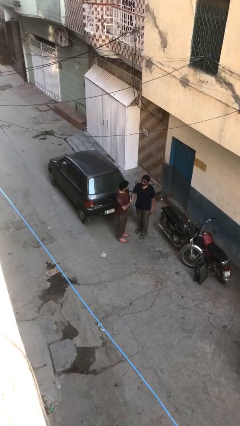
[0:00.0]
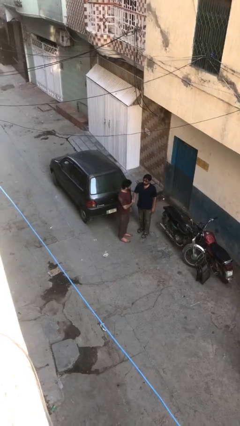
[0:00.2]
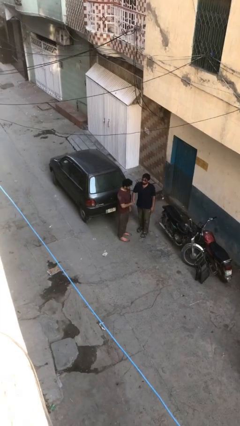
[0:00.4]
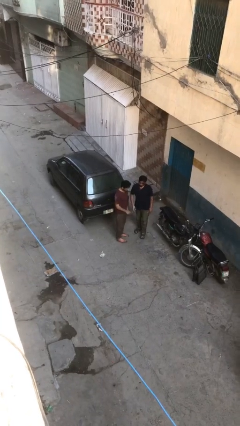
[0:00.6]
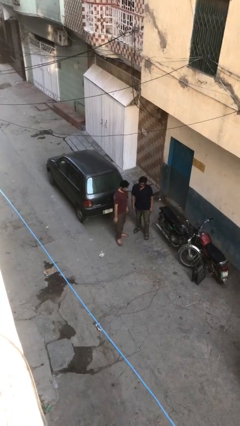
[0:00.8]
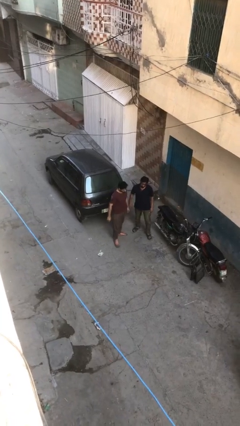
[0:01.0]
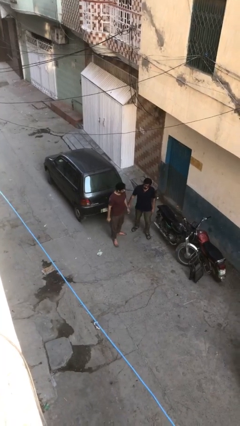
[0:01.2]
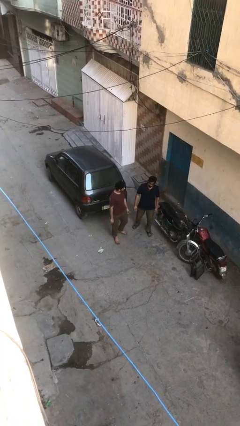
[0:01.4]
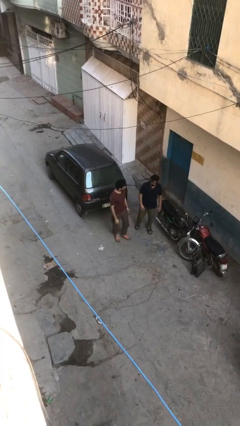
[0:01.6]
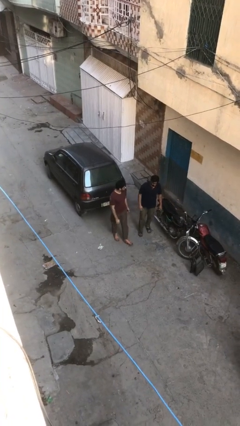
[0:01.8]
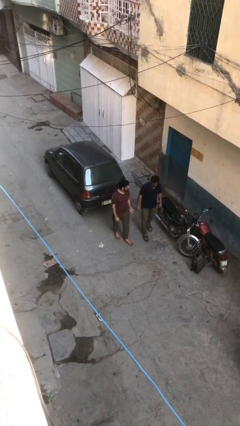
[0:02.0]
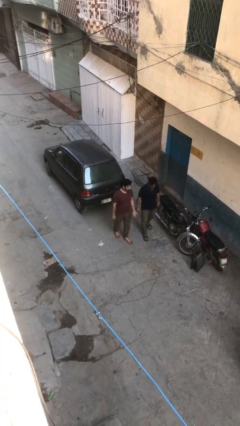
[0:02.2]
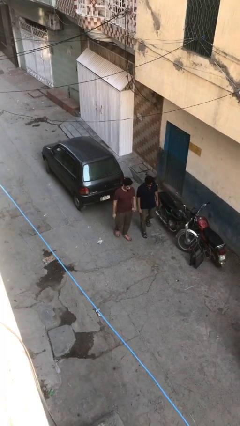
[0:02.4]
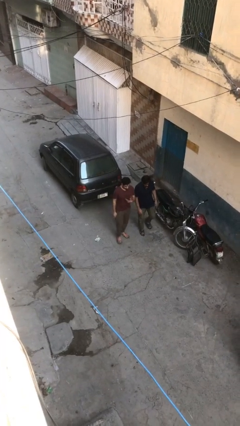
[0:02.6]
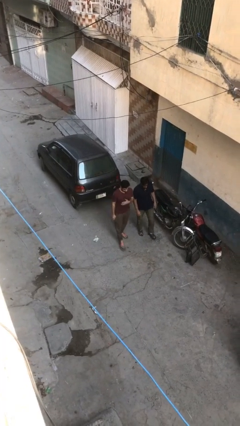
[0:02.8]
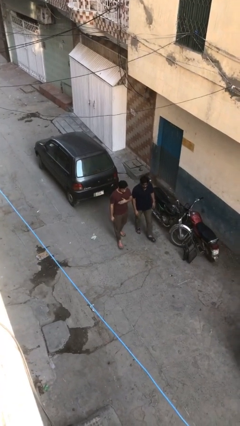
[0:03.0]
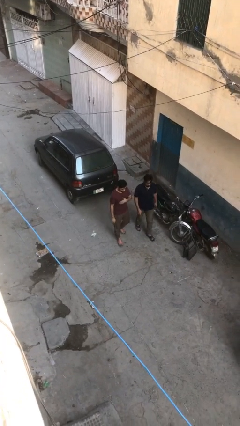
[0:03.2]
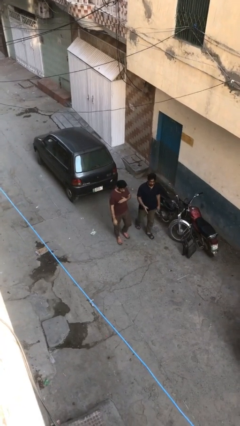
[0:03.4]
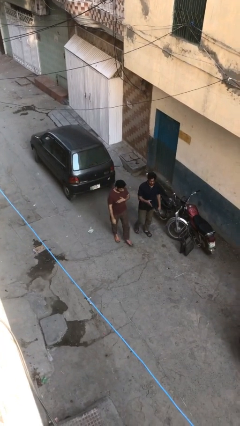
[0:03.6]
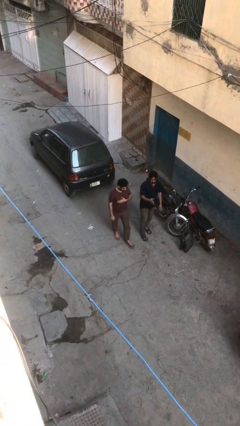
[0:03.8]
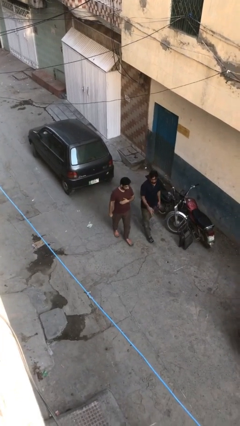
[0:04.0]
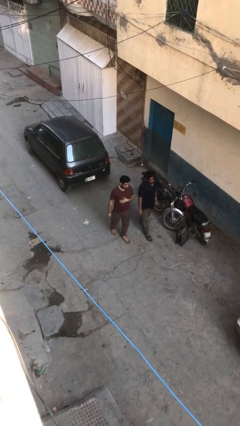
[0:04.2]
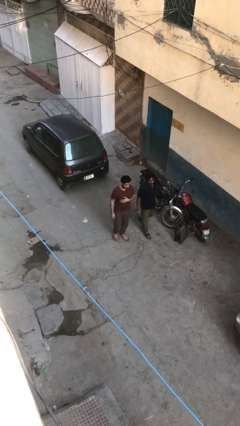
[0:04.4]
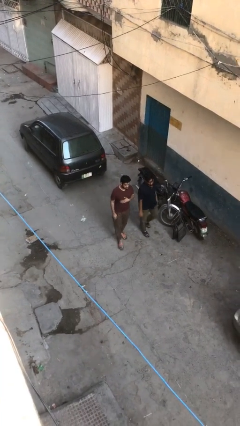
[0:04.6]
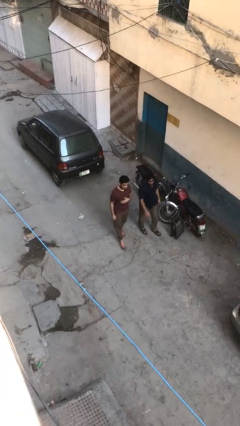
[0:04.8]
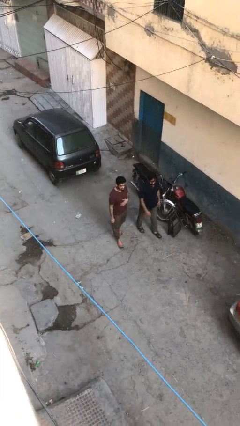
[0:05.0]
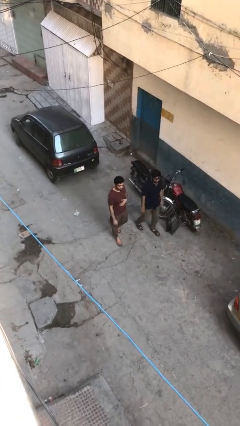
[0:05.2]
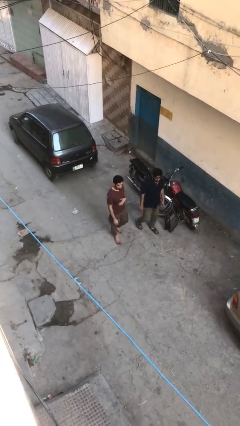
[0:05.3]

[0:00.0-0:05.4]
person talks to person

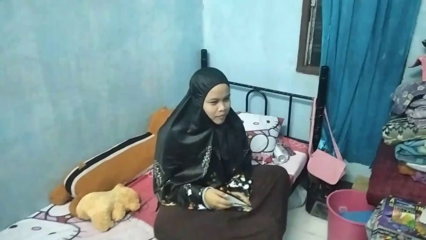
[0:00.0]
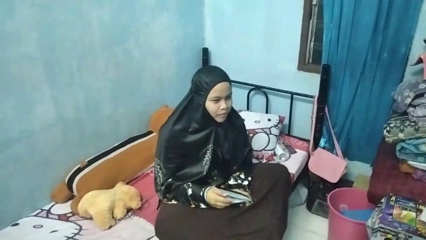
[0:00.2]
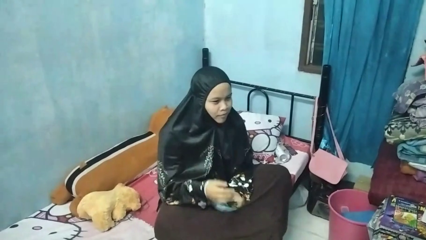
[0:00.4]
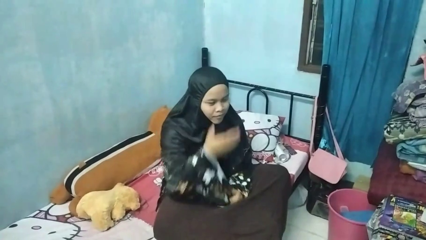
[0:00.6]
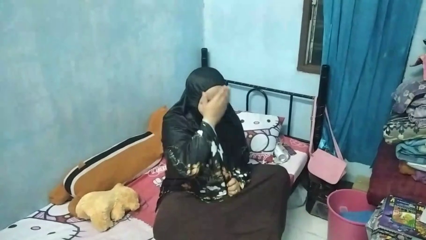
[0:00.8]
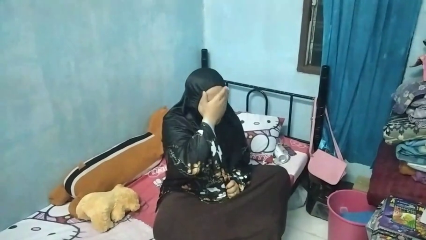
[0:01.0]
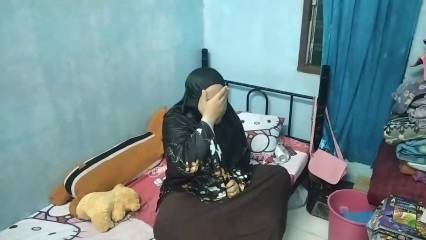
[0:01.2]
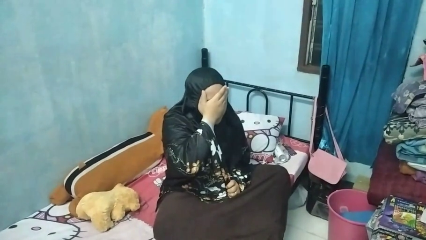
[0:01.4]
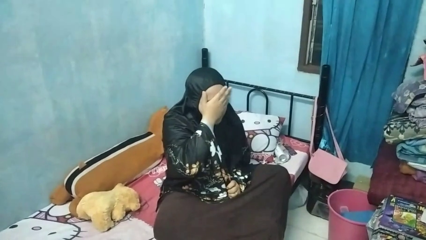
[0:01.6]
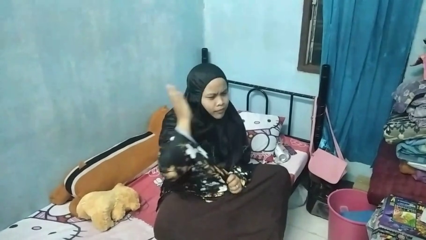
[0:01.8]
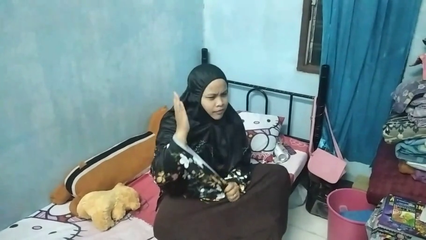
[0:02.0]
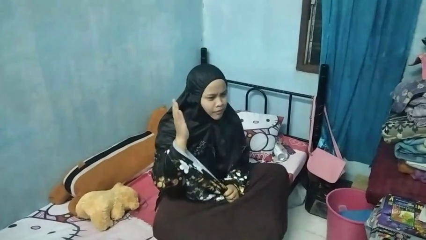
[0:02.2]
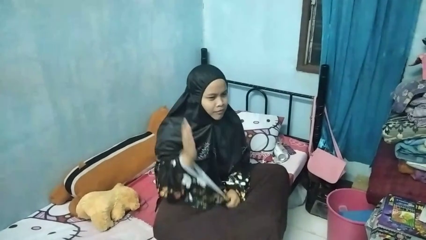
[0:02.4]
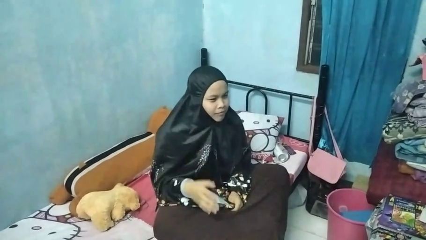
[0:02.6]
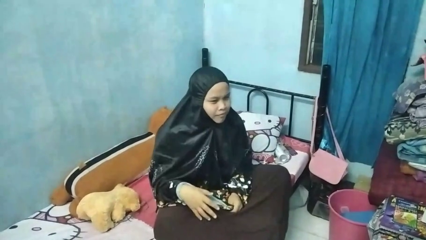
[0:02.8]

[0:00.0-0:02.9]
person covers face with hands

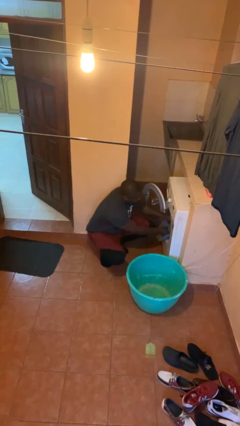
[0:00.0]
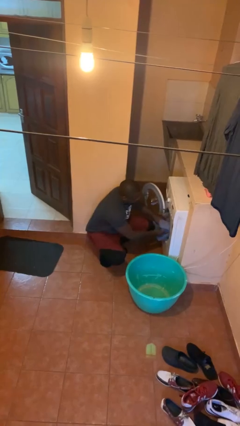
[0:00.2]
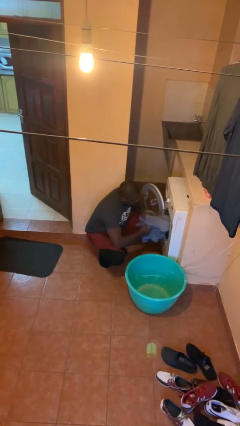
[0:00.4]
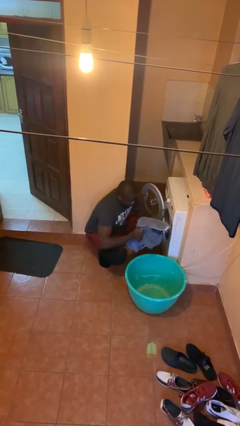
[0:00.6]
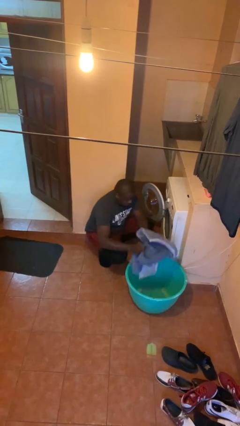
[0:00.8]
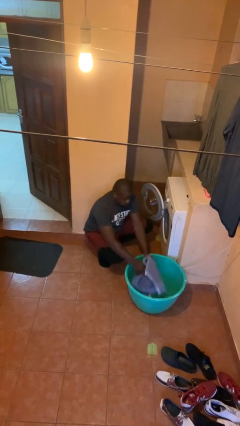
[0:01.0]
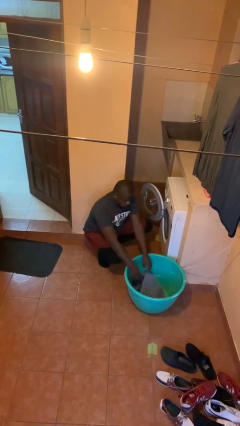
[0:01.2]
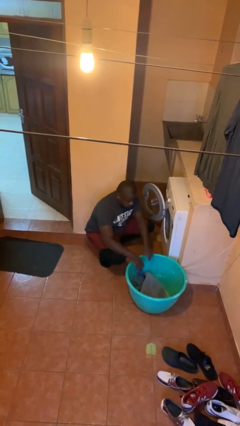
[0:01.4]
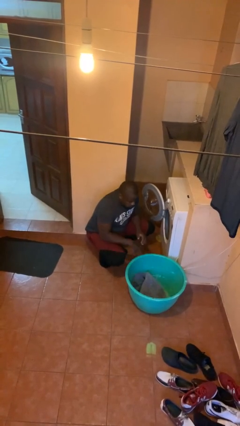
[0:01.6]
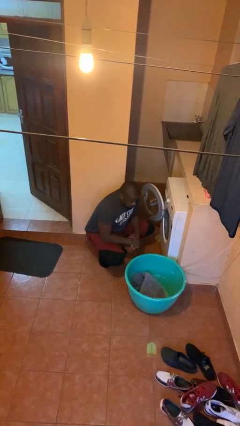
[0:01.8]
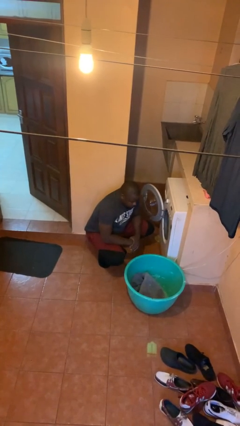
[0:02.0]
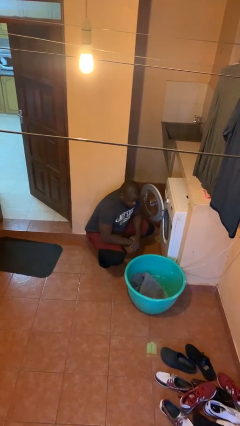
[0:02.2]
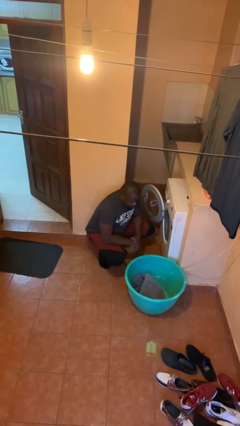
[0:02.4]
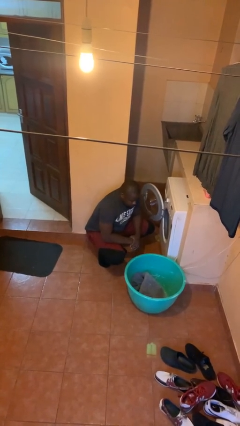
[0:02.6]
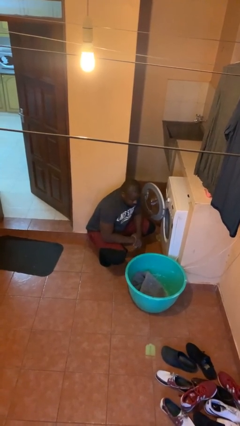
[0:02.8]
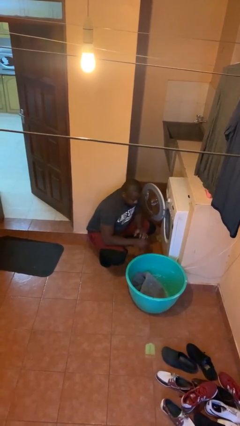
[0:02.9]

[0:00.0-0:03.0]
person unloads clotheswasher

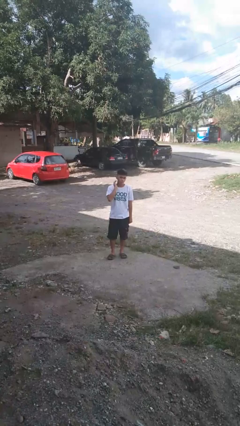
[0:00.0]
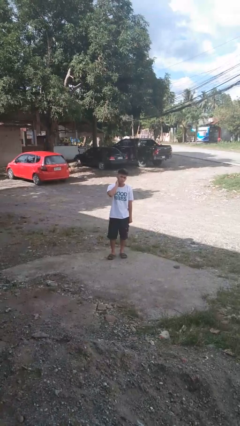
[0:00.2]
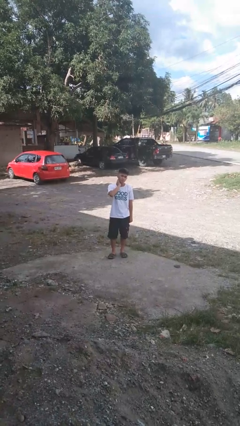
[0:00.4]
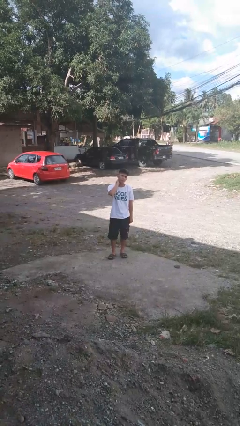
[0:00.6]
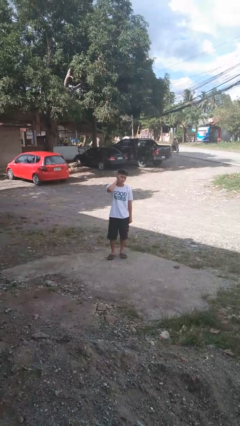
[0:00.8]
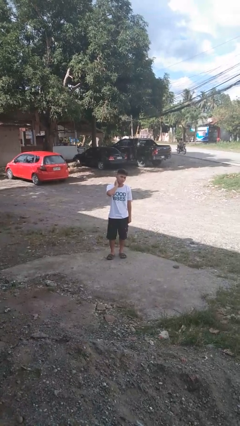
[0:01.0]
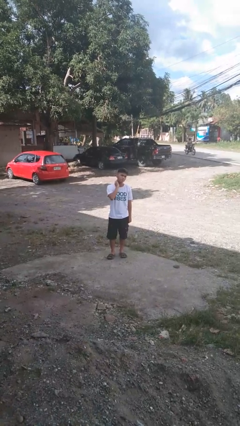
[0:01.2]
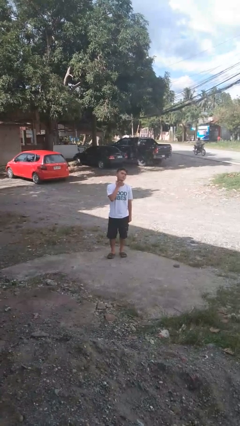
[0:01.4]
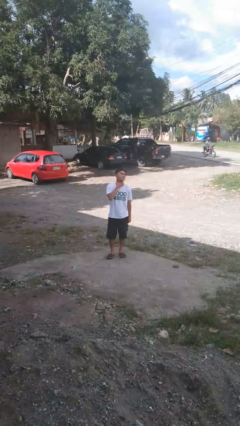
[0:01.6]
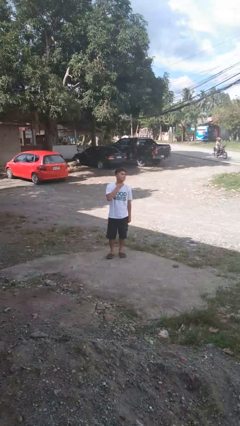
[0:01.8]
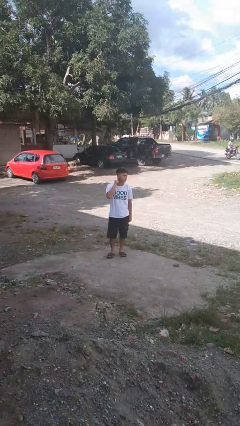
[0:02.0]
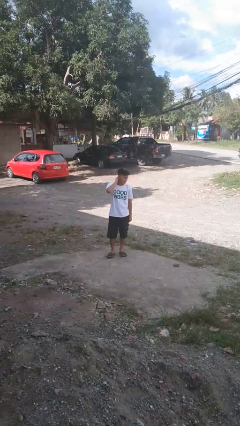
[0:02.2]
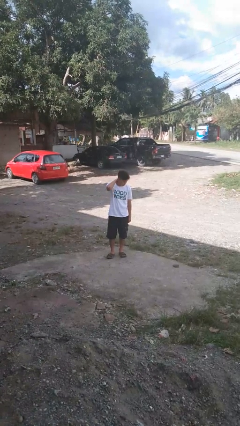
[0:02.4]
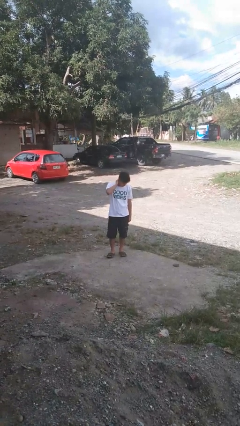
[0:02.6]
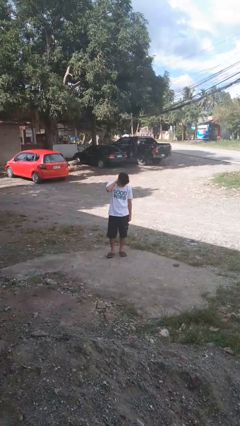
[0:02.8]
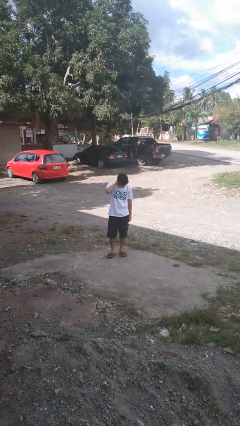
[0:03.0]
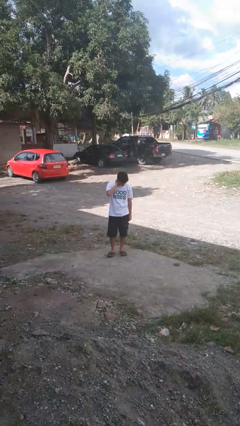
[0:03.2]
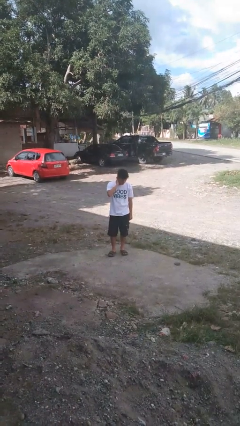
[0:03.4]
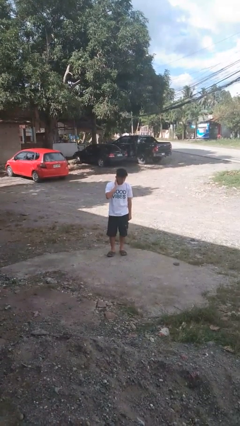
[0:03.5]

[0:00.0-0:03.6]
person rubs neck

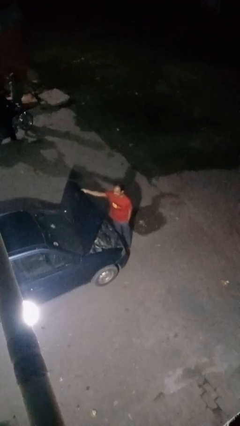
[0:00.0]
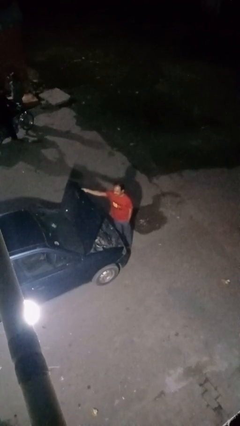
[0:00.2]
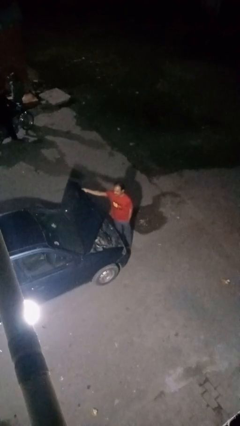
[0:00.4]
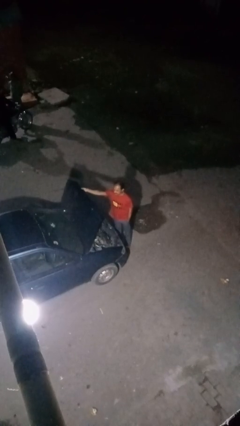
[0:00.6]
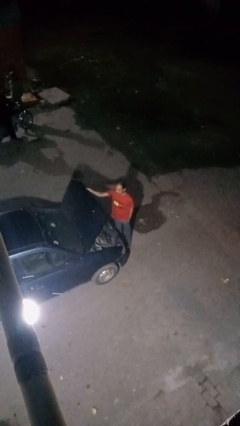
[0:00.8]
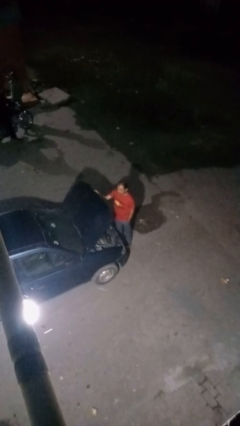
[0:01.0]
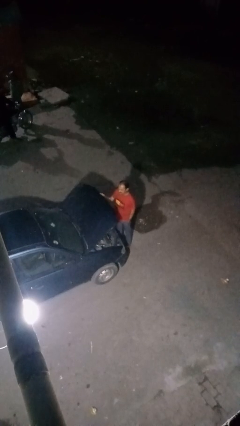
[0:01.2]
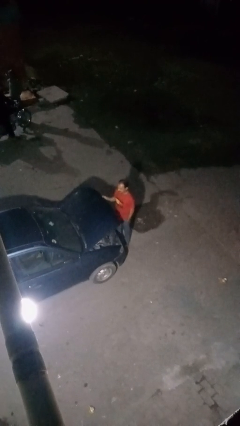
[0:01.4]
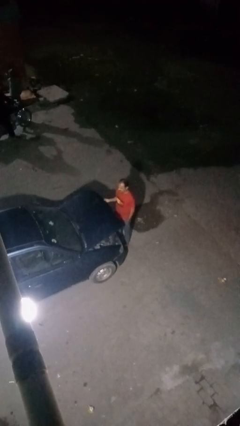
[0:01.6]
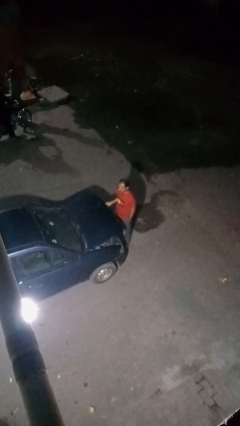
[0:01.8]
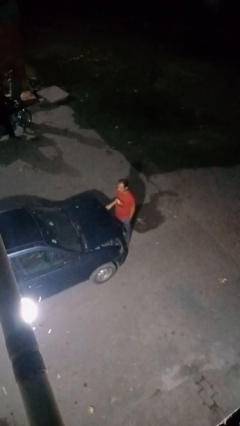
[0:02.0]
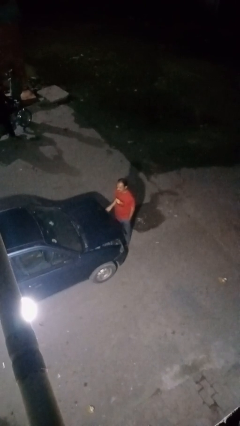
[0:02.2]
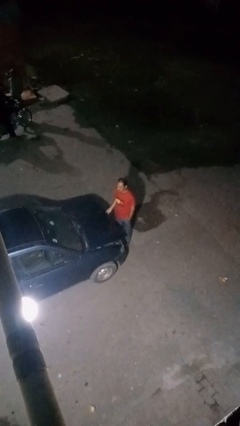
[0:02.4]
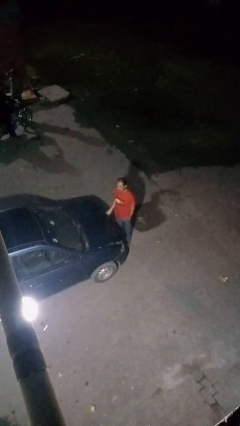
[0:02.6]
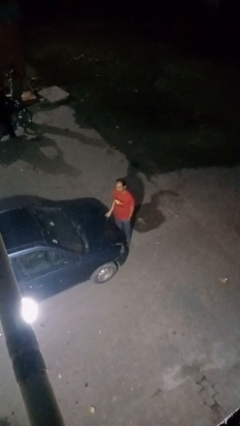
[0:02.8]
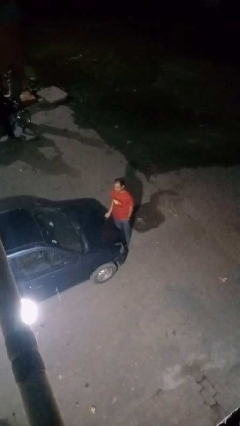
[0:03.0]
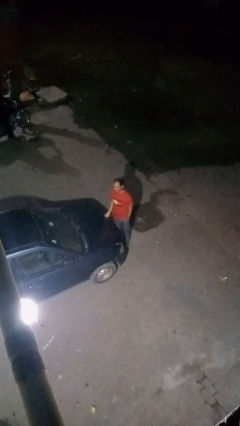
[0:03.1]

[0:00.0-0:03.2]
person closes car hood
